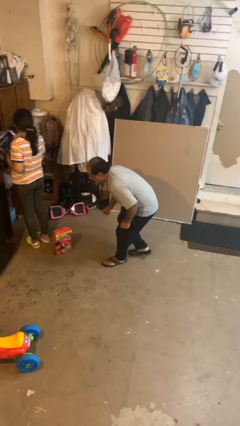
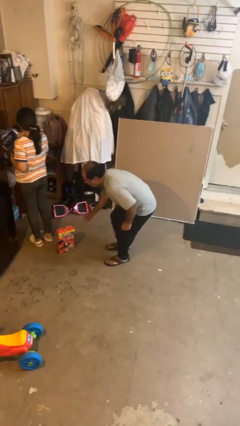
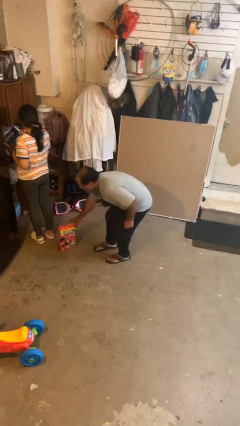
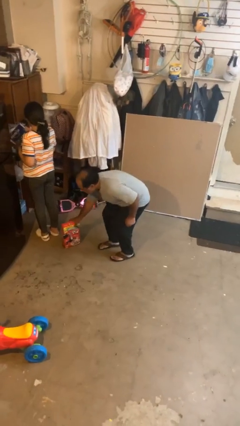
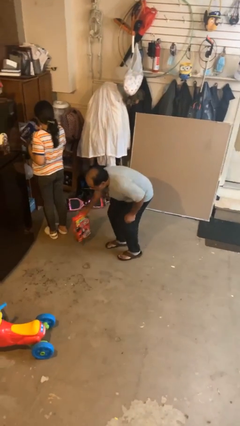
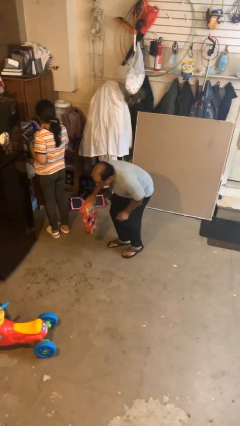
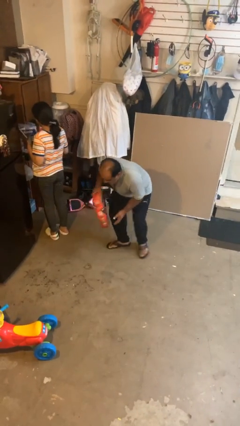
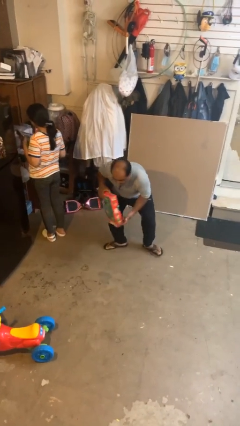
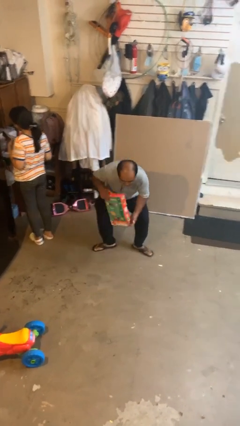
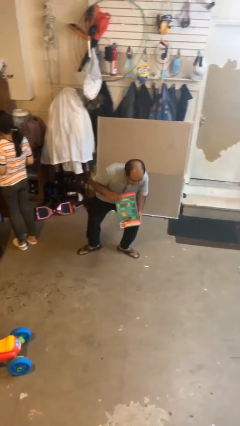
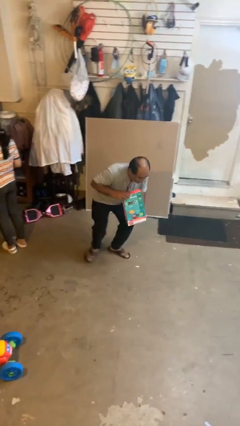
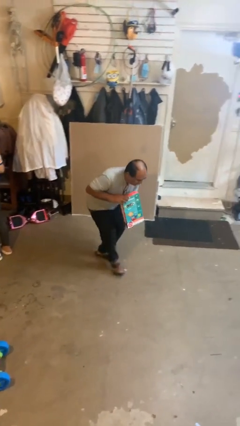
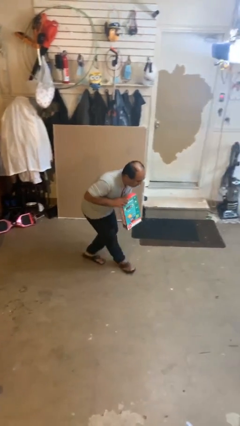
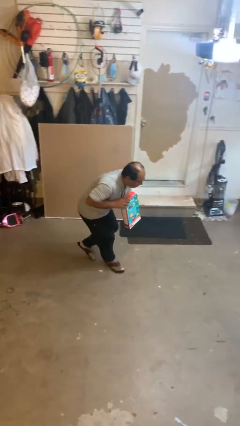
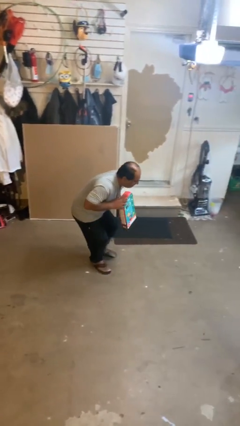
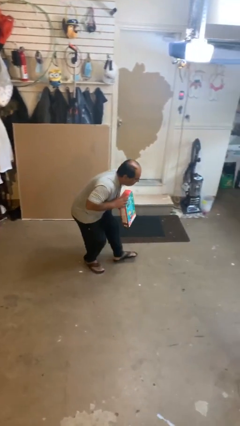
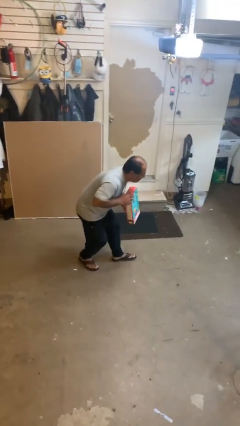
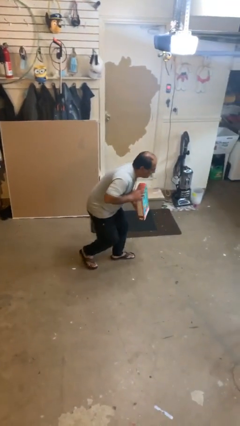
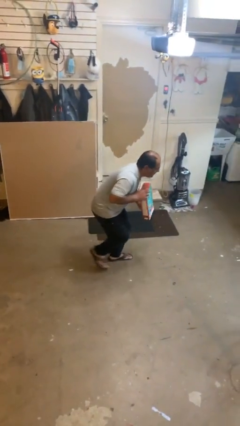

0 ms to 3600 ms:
person steals object from person

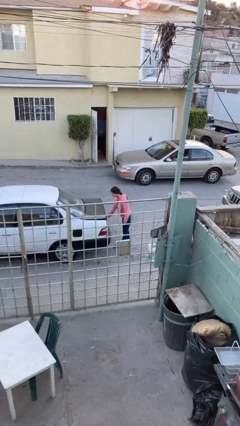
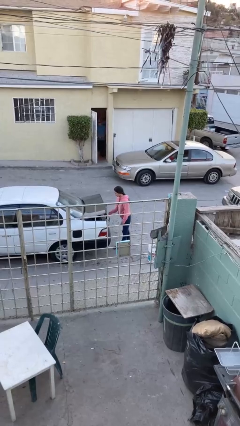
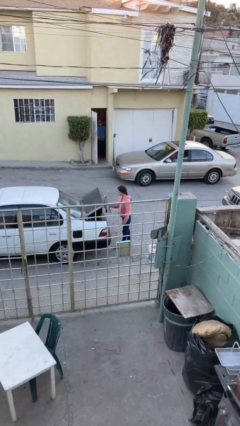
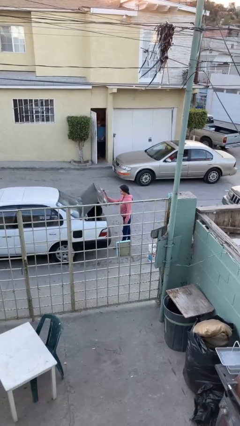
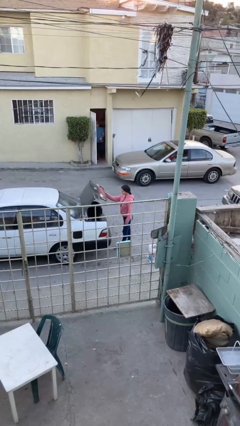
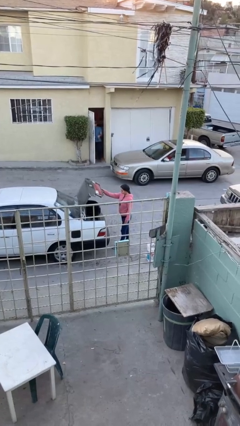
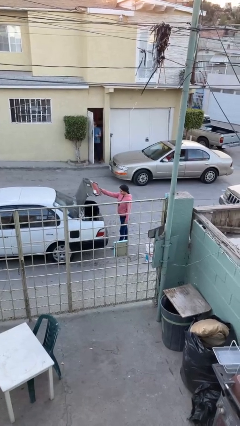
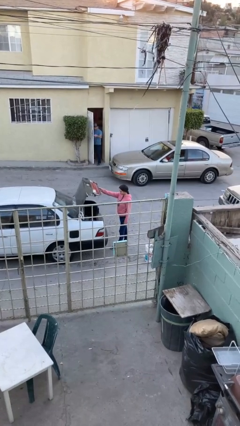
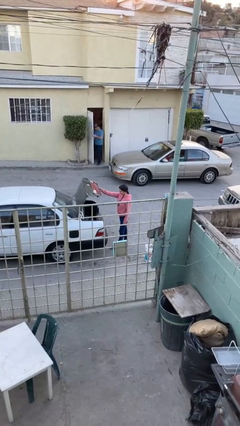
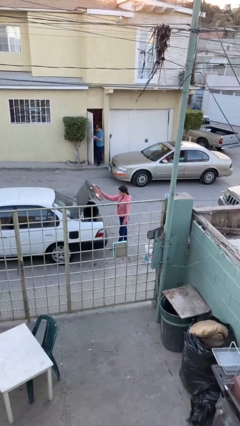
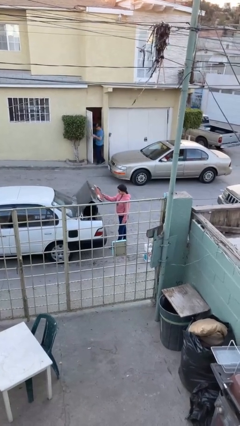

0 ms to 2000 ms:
person opens car trunk

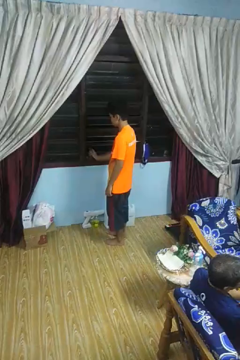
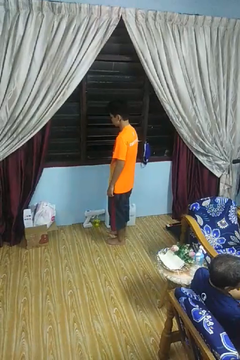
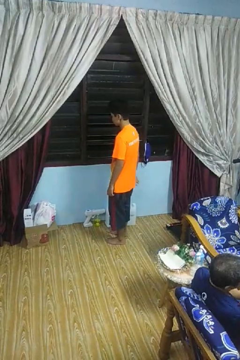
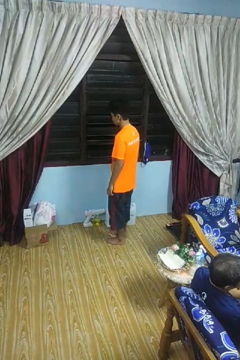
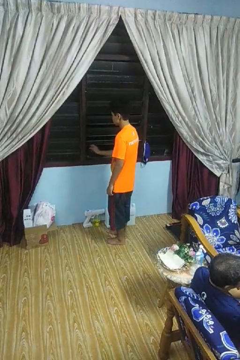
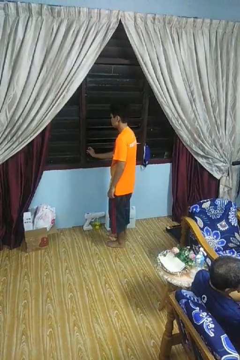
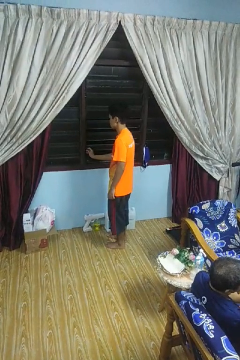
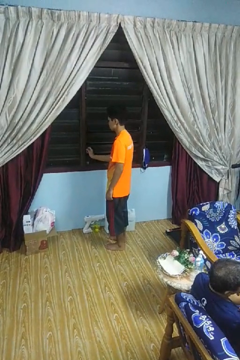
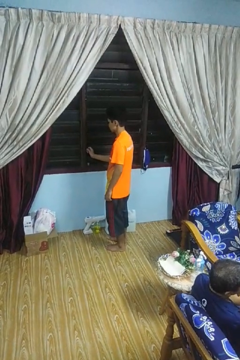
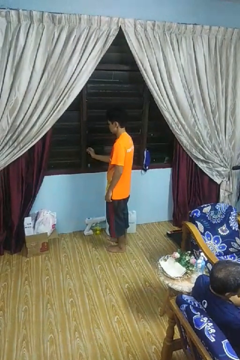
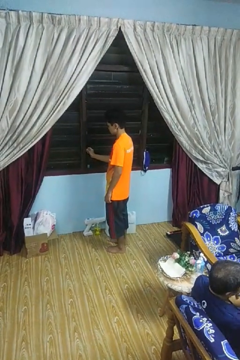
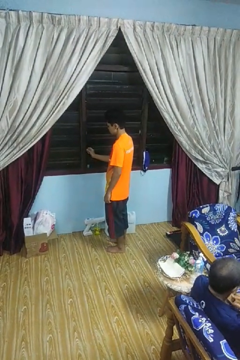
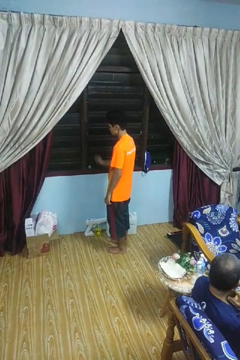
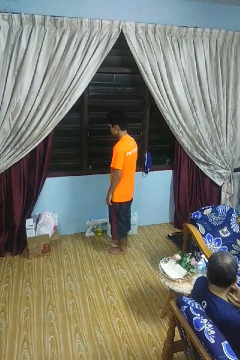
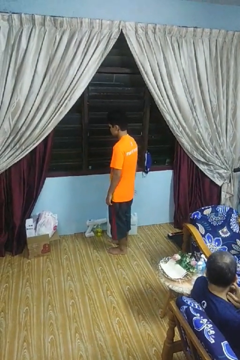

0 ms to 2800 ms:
person closes home window

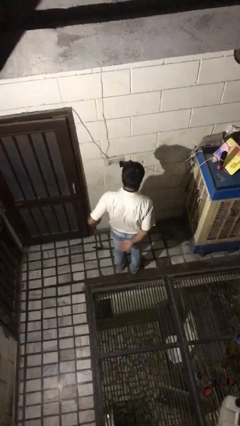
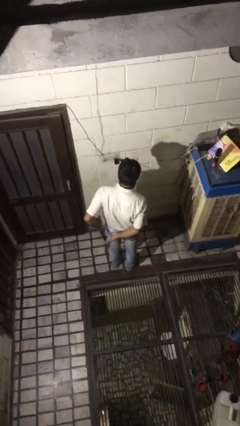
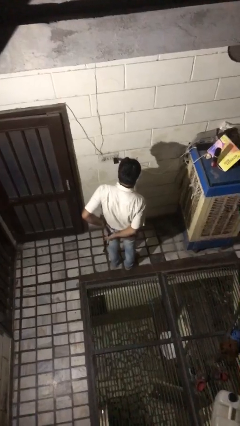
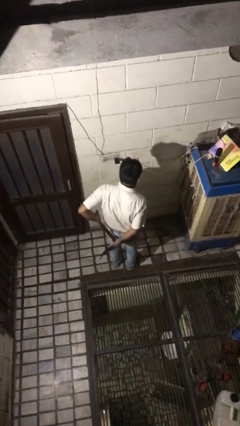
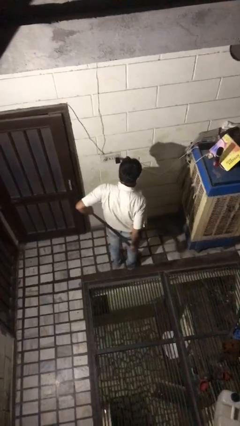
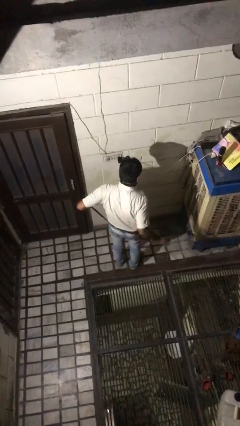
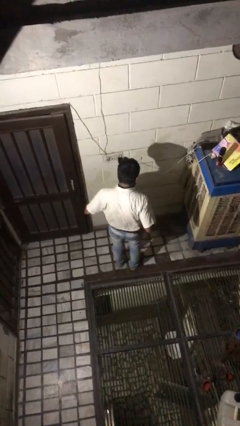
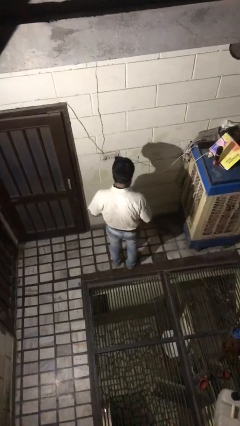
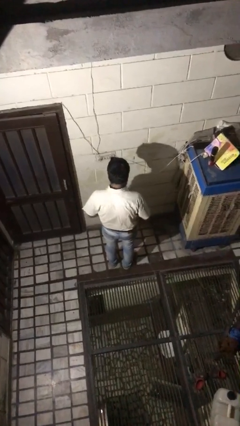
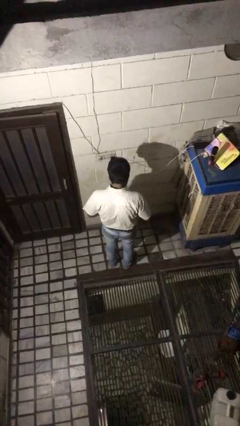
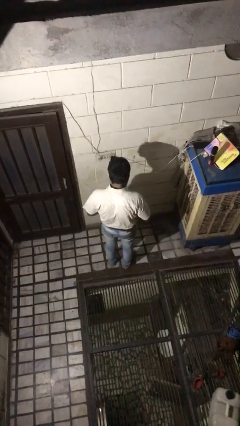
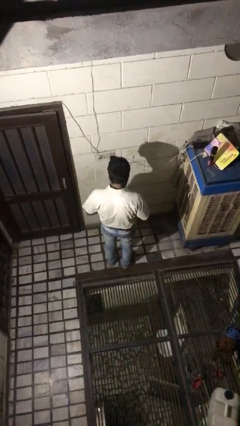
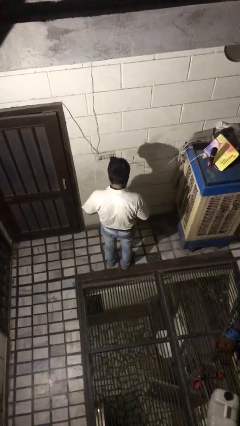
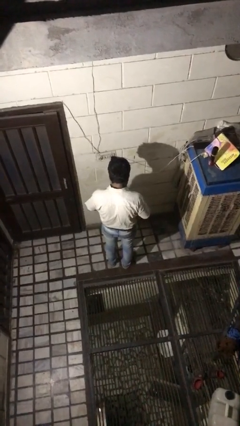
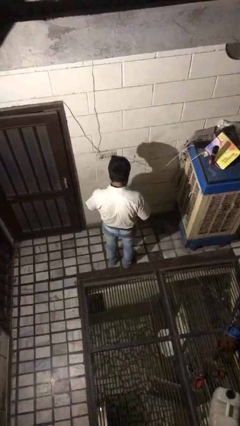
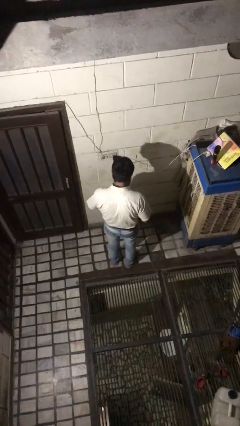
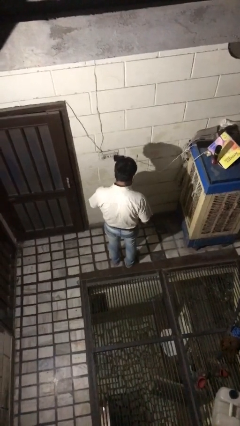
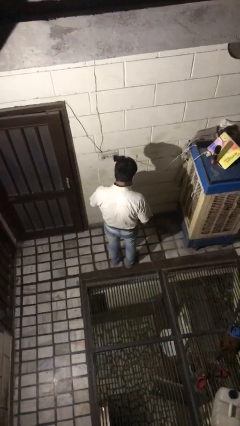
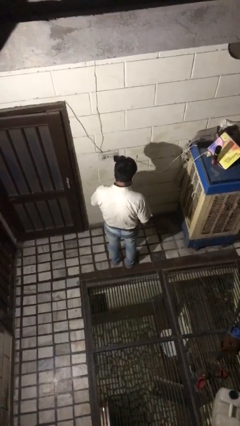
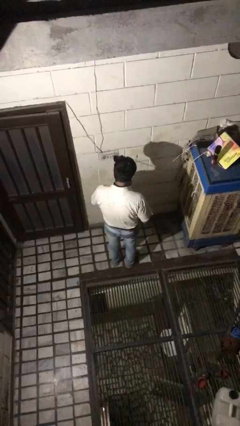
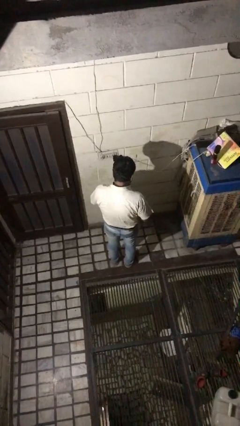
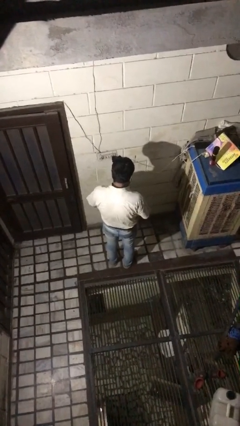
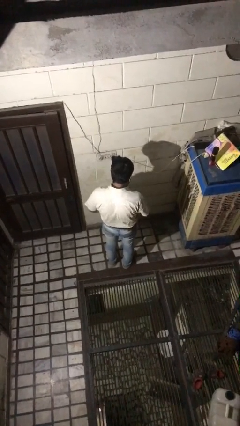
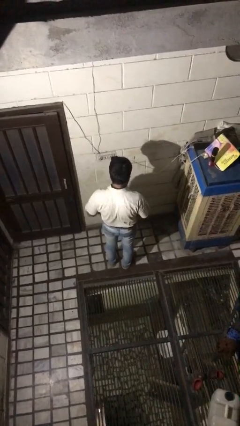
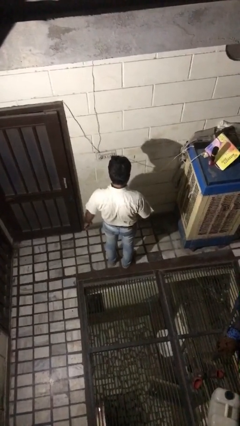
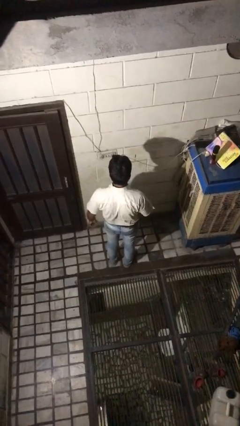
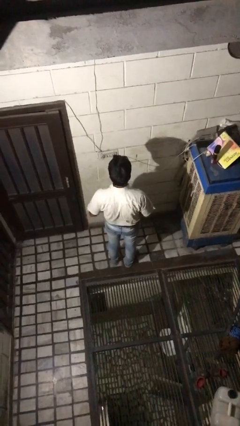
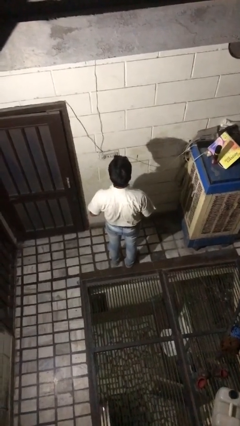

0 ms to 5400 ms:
person puts on belt

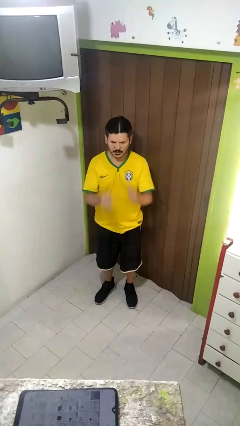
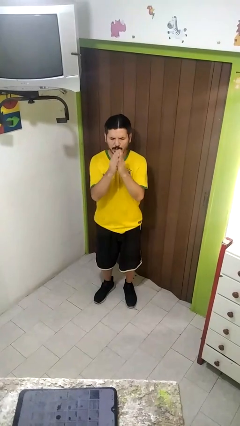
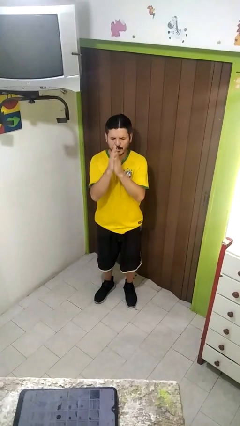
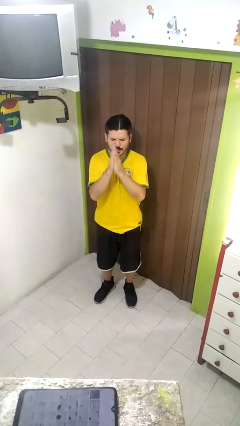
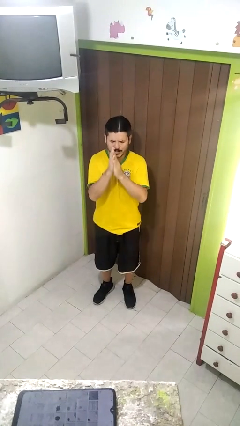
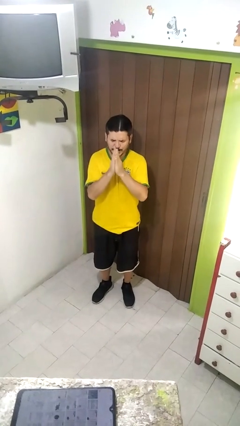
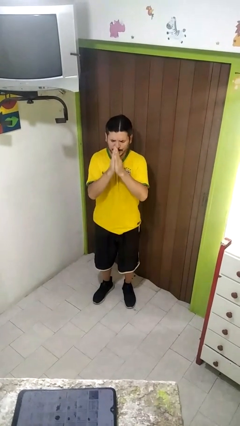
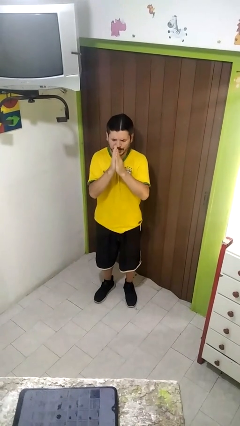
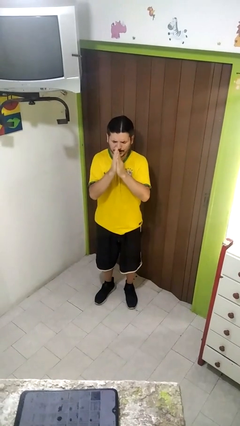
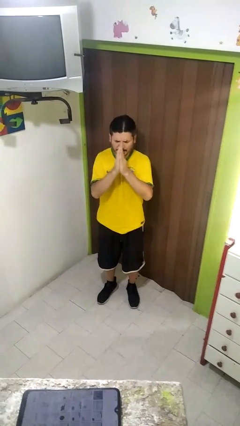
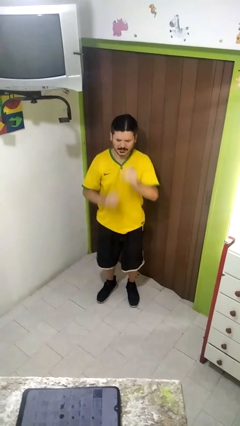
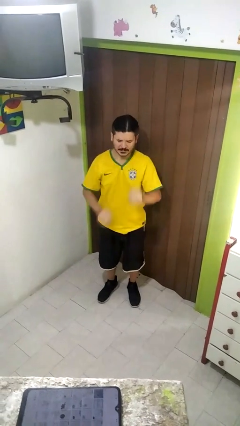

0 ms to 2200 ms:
person blows into hands

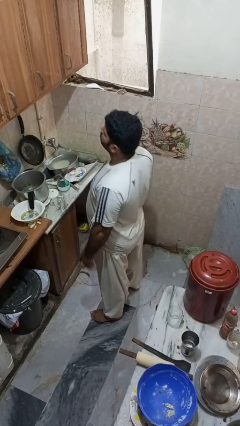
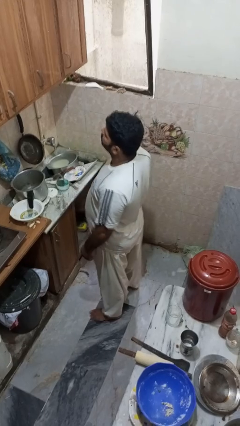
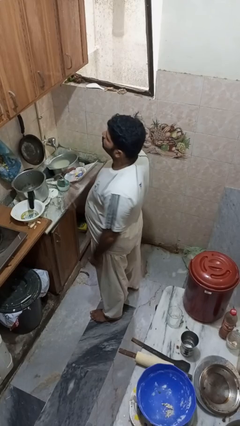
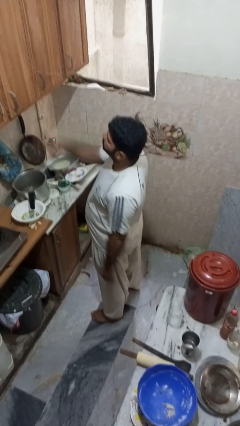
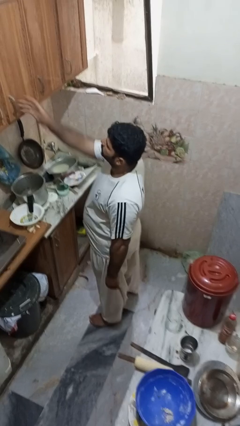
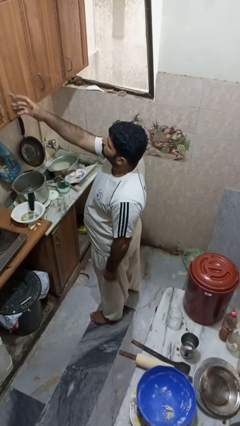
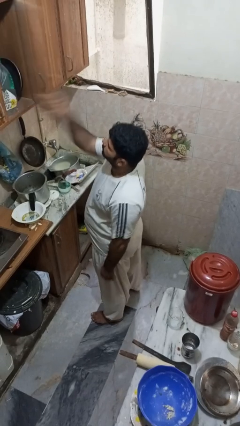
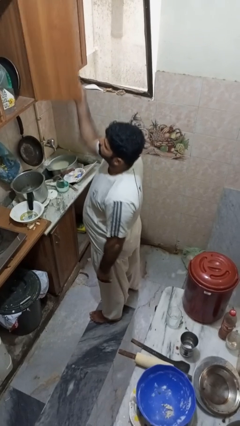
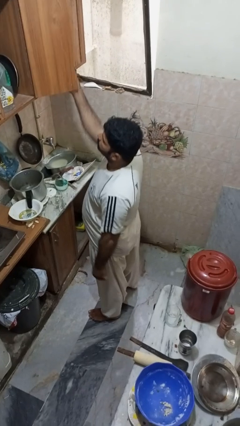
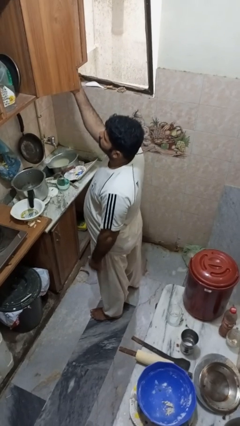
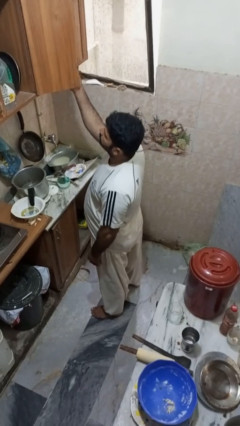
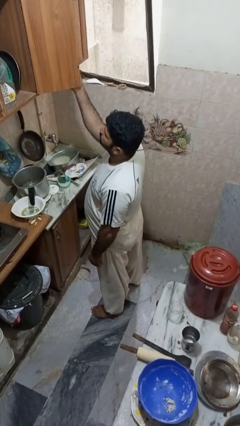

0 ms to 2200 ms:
person opens cabinet
